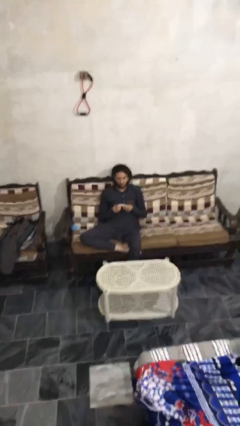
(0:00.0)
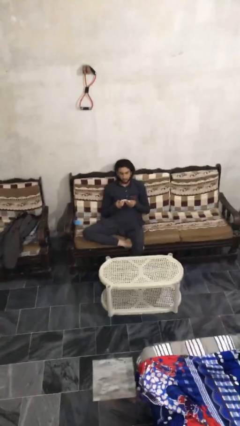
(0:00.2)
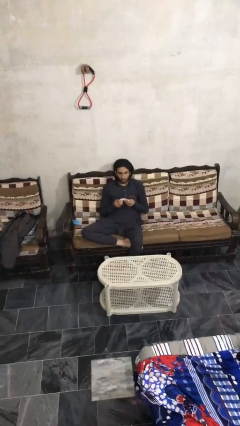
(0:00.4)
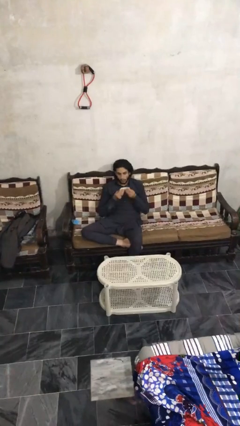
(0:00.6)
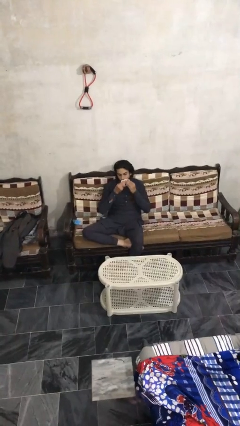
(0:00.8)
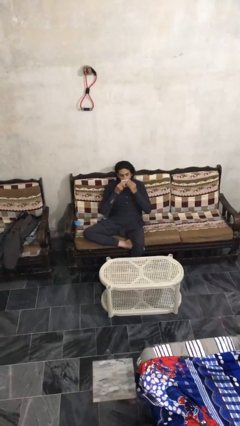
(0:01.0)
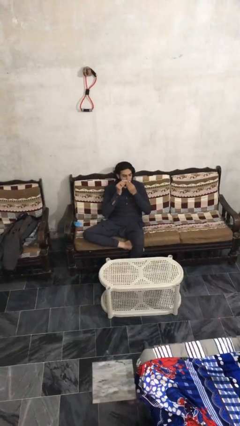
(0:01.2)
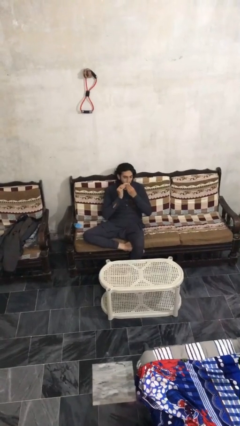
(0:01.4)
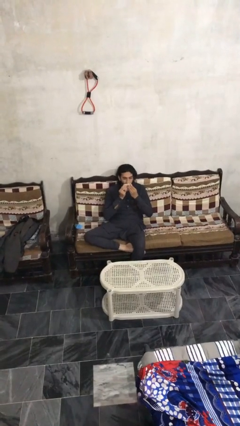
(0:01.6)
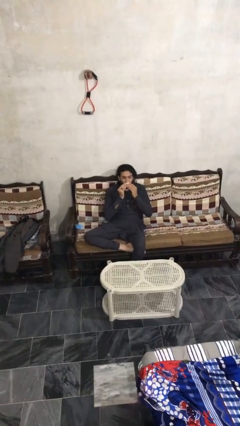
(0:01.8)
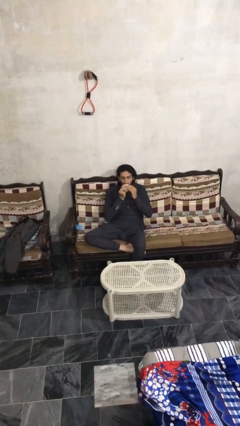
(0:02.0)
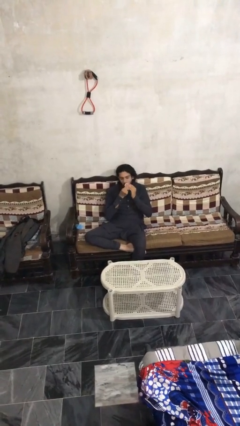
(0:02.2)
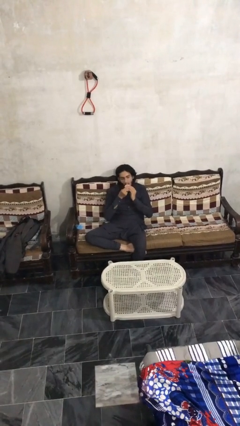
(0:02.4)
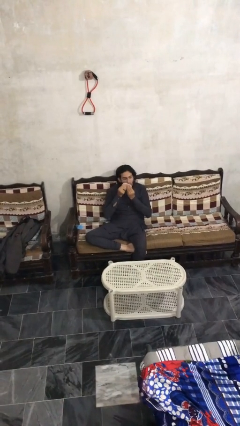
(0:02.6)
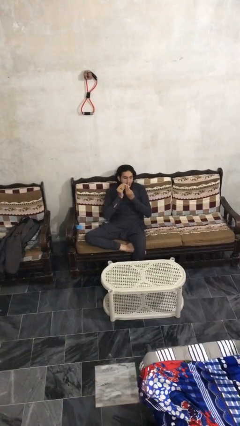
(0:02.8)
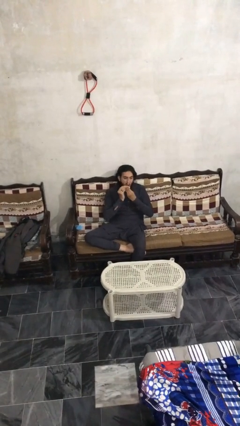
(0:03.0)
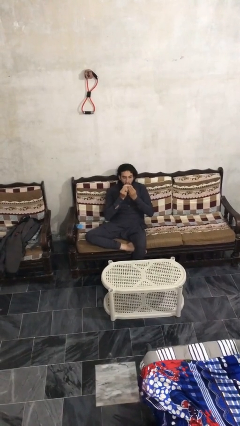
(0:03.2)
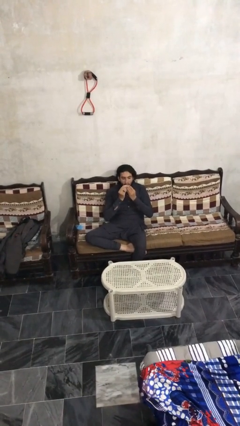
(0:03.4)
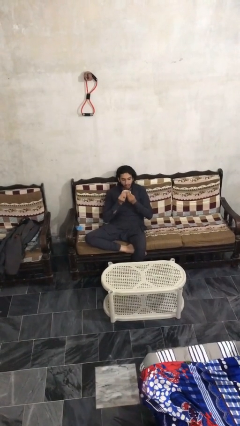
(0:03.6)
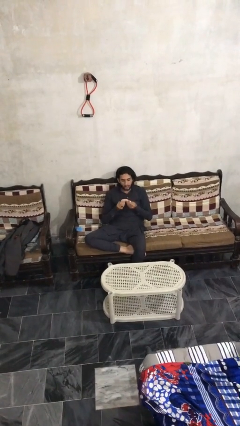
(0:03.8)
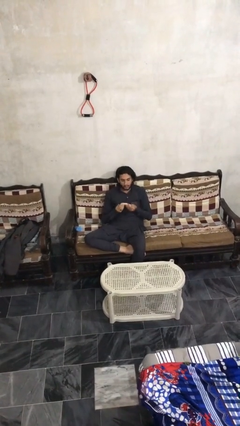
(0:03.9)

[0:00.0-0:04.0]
person wipes mouth with napkin

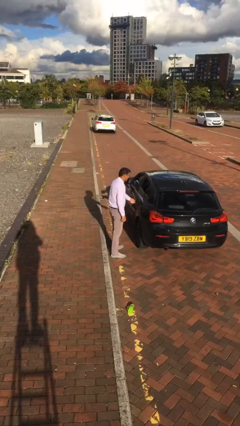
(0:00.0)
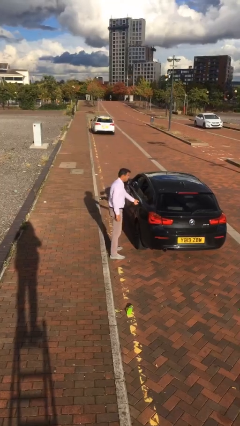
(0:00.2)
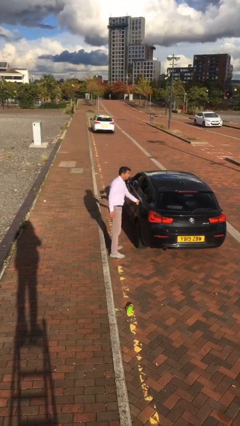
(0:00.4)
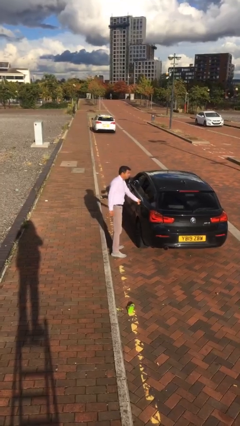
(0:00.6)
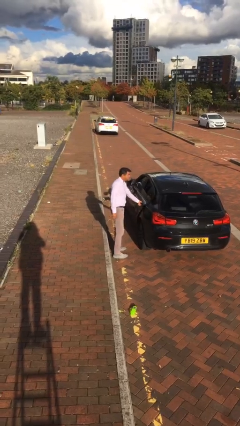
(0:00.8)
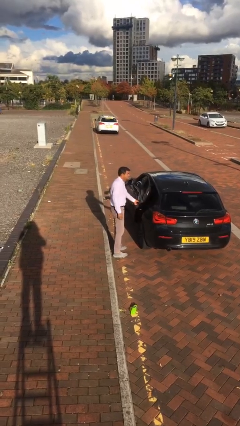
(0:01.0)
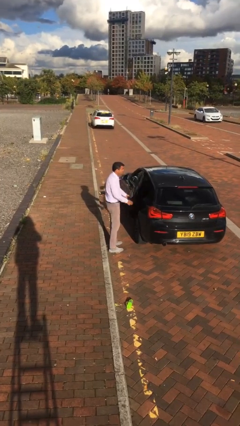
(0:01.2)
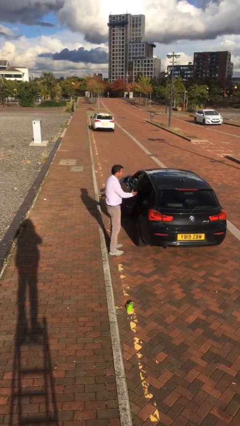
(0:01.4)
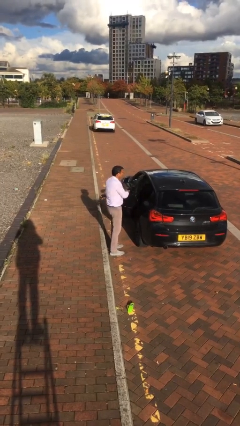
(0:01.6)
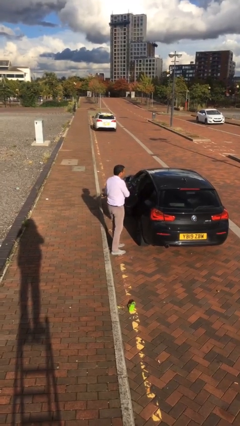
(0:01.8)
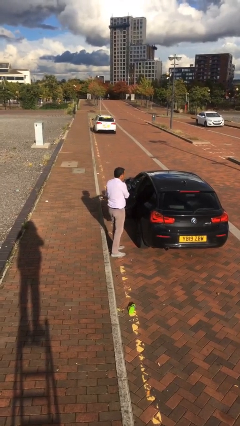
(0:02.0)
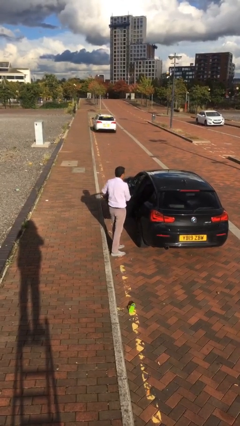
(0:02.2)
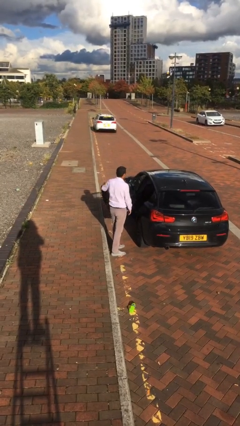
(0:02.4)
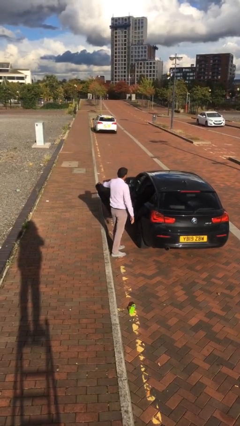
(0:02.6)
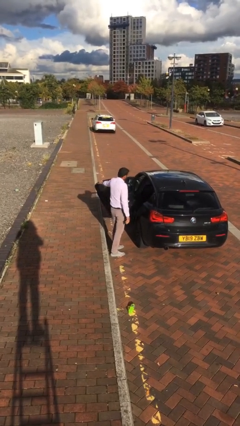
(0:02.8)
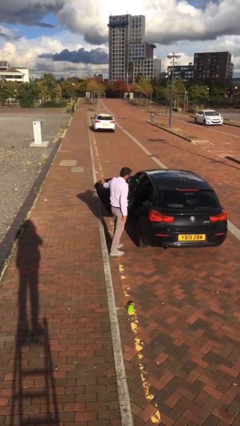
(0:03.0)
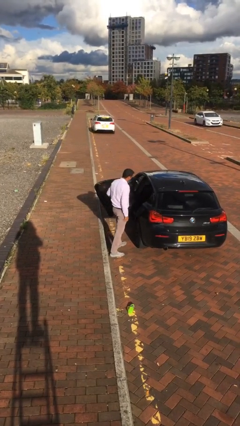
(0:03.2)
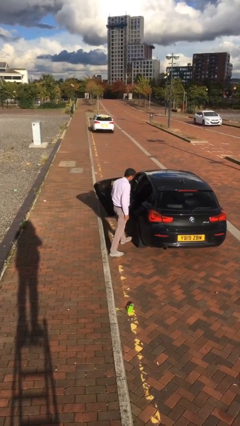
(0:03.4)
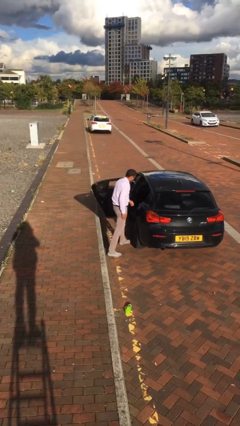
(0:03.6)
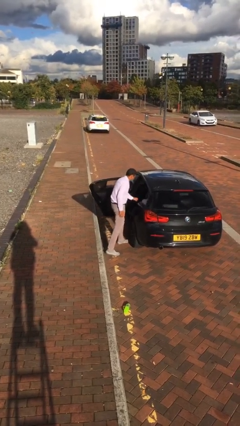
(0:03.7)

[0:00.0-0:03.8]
person opens car door

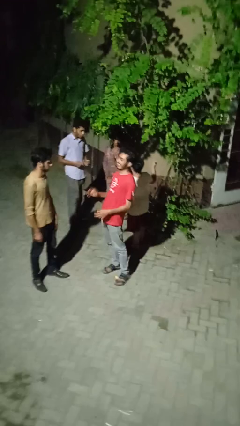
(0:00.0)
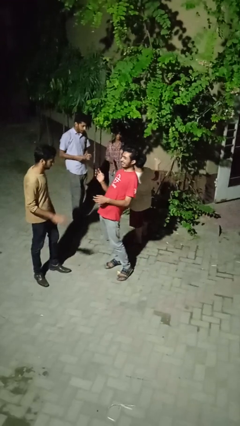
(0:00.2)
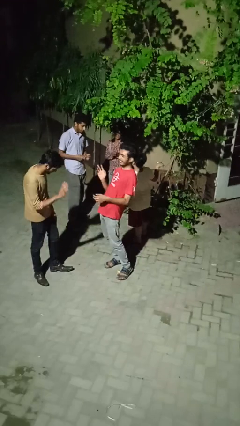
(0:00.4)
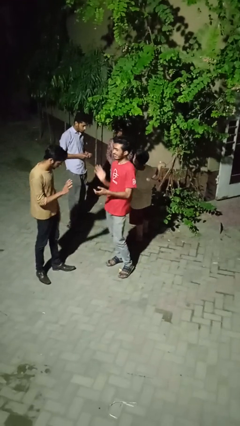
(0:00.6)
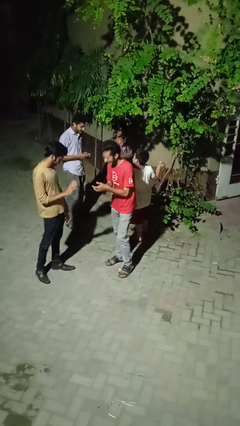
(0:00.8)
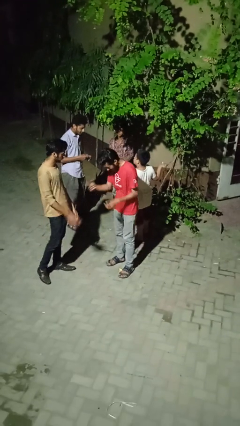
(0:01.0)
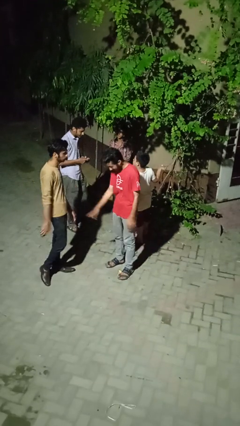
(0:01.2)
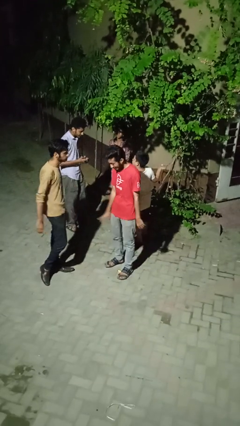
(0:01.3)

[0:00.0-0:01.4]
person laughs with person

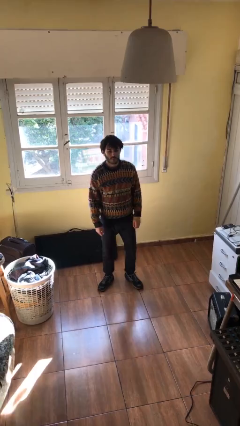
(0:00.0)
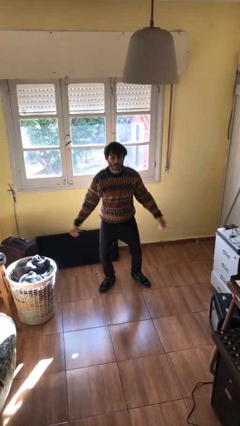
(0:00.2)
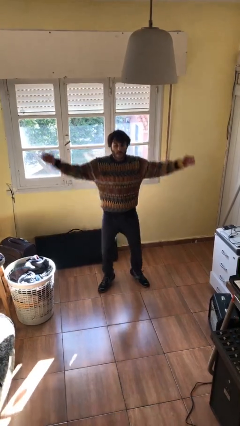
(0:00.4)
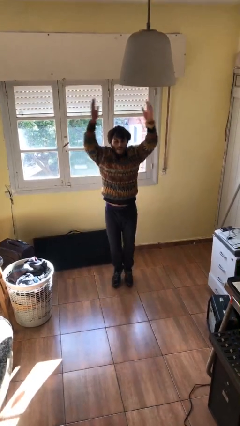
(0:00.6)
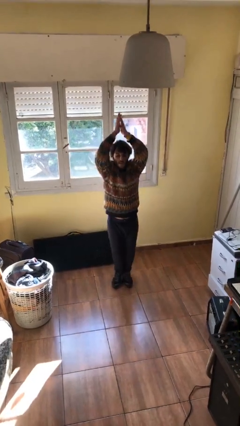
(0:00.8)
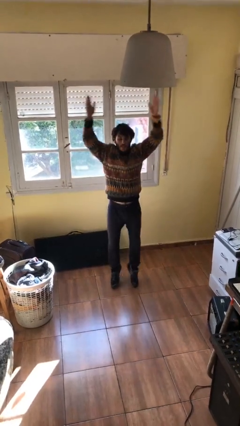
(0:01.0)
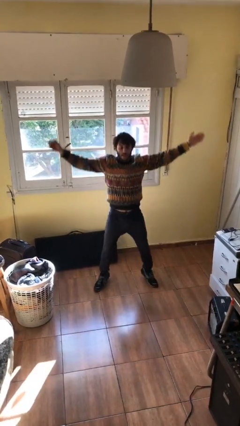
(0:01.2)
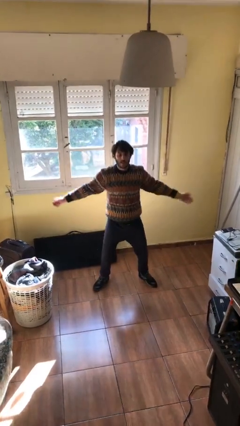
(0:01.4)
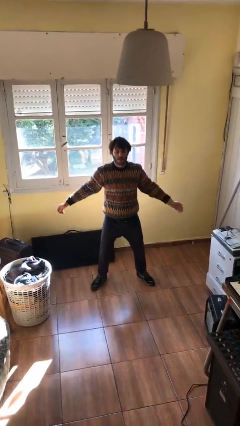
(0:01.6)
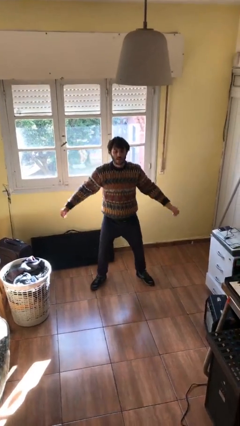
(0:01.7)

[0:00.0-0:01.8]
person exercises with lunges

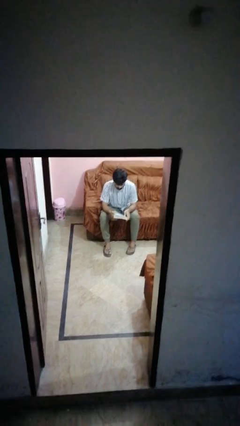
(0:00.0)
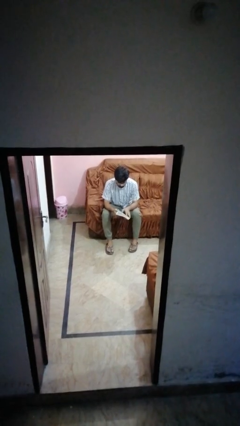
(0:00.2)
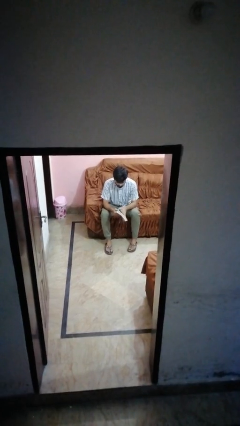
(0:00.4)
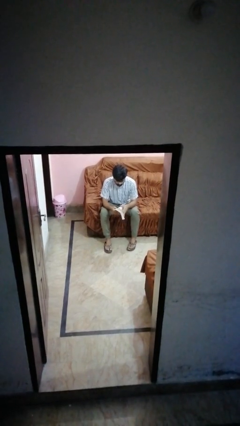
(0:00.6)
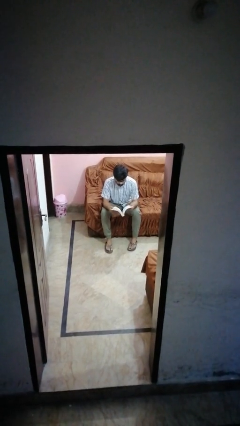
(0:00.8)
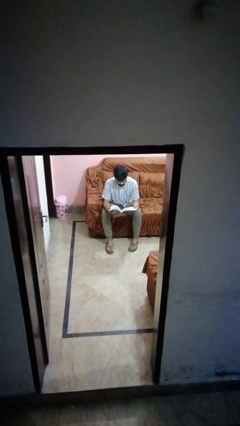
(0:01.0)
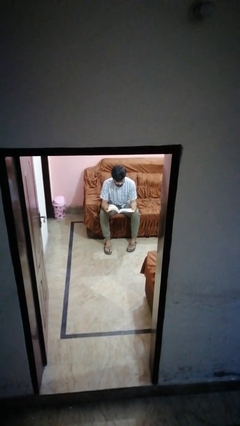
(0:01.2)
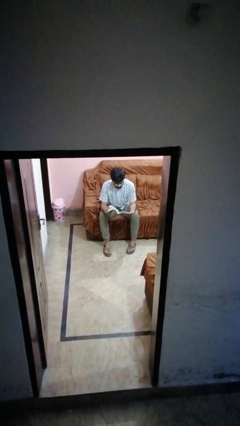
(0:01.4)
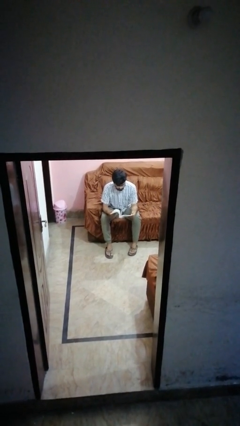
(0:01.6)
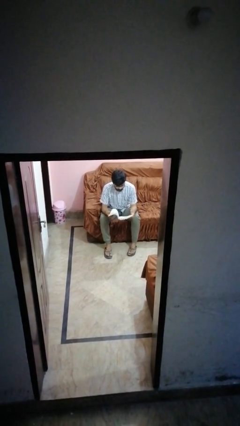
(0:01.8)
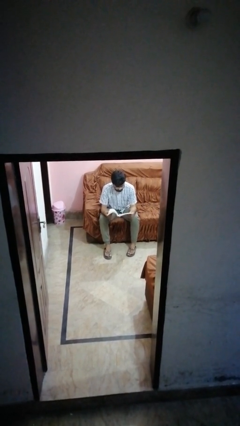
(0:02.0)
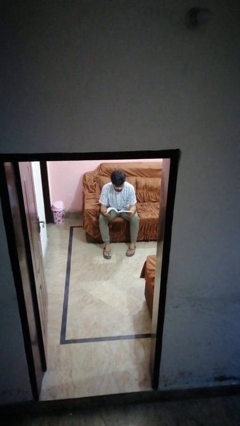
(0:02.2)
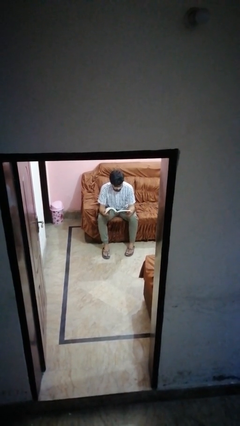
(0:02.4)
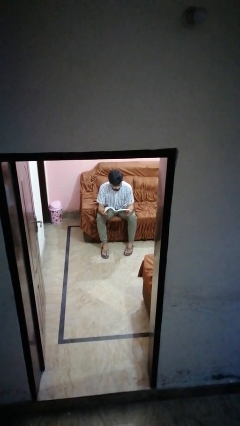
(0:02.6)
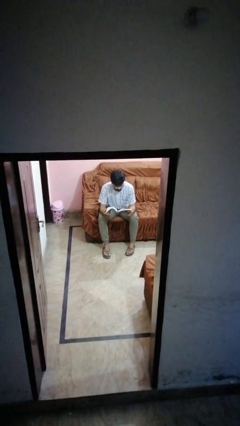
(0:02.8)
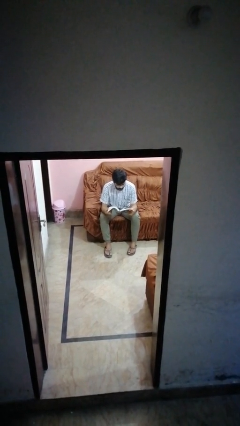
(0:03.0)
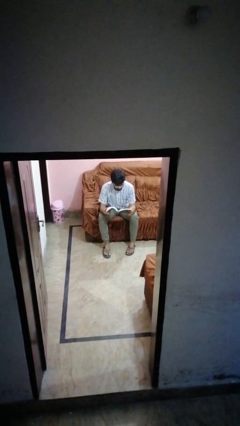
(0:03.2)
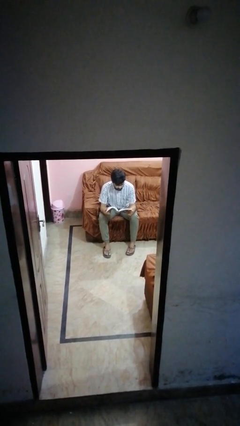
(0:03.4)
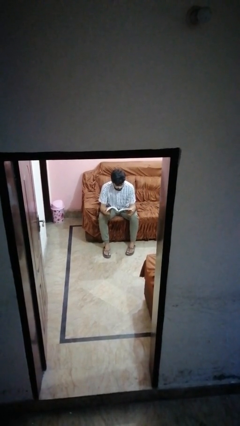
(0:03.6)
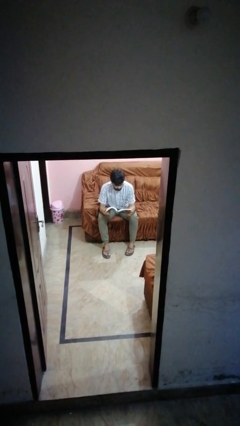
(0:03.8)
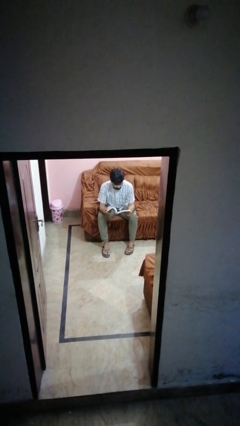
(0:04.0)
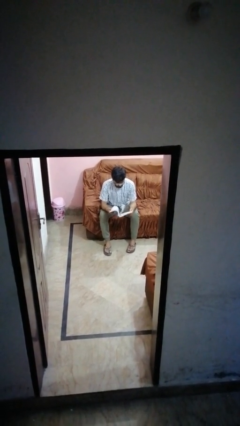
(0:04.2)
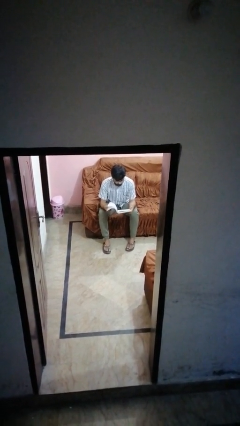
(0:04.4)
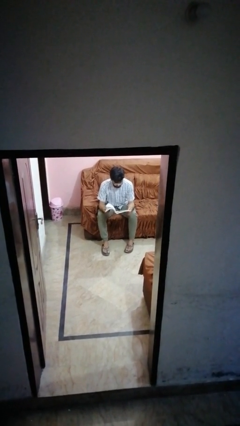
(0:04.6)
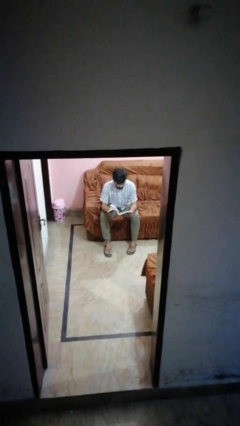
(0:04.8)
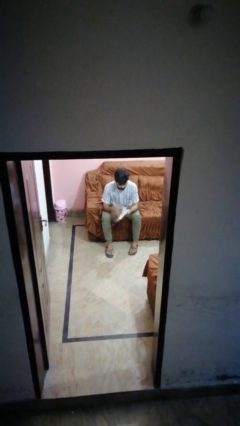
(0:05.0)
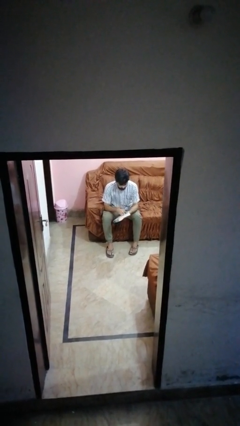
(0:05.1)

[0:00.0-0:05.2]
person reads book

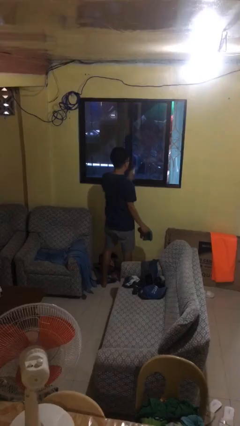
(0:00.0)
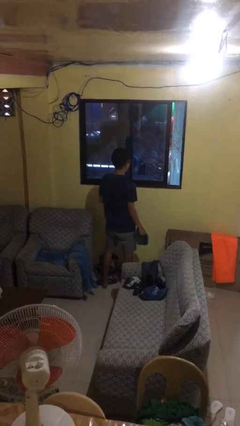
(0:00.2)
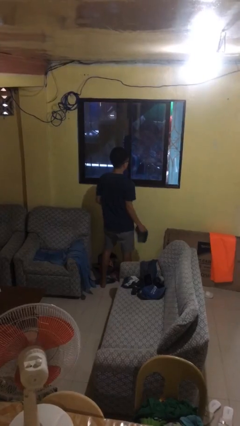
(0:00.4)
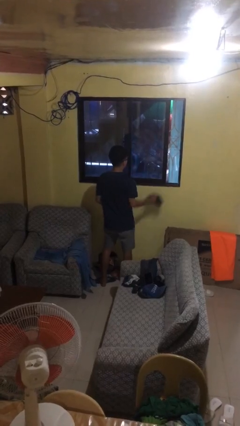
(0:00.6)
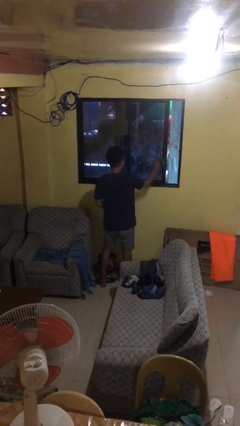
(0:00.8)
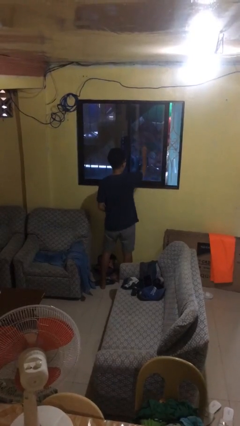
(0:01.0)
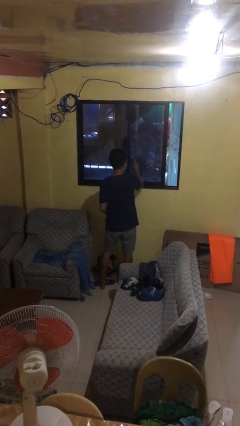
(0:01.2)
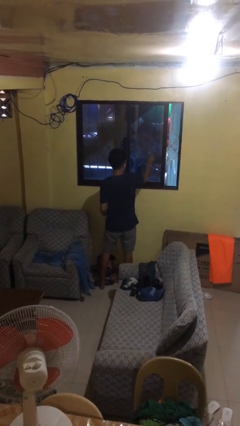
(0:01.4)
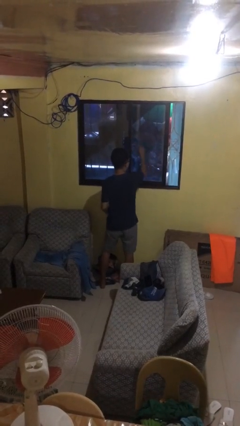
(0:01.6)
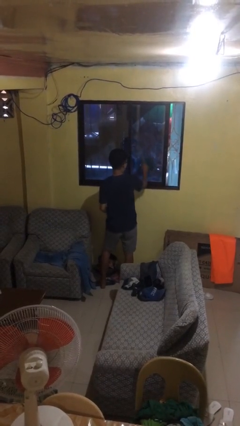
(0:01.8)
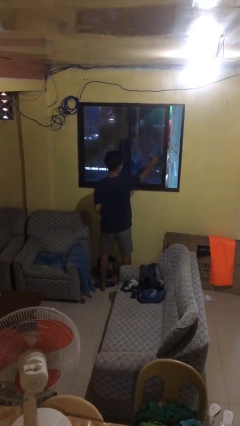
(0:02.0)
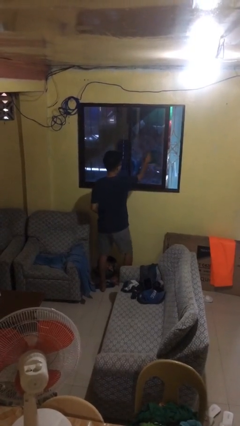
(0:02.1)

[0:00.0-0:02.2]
person washes window
